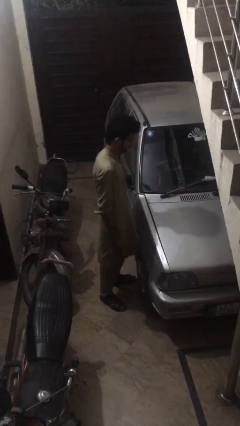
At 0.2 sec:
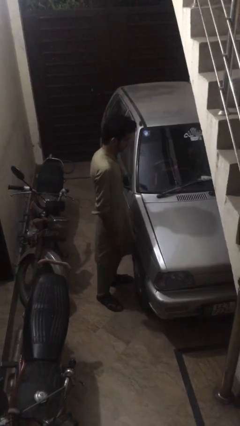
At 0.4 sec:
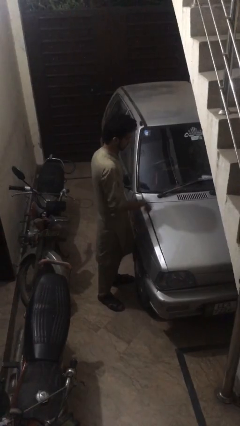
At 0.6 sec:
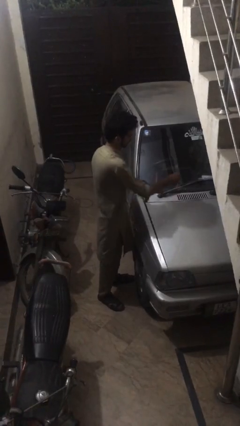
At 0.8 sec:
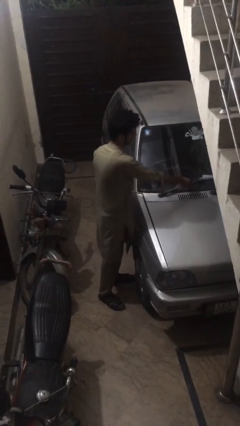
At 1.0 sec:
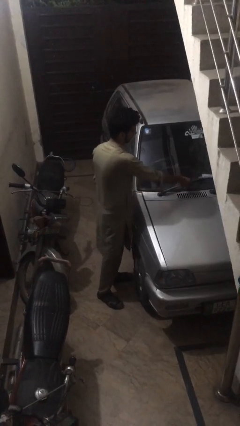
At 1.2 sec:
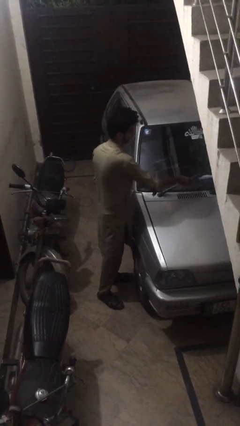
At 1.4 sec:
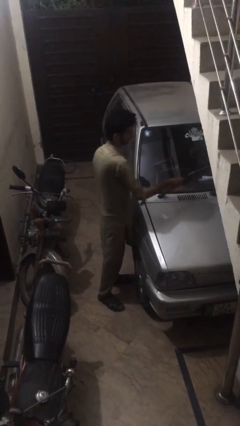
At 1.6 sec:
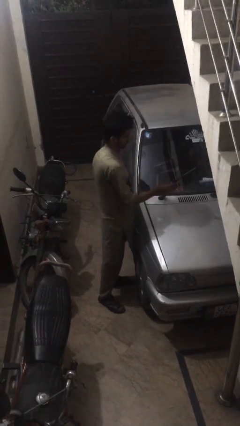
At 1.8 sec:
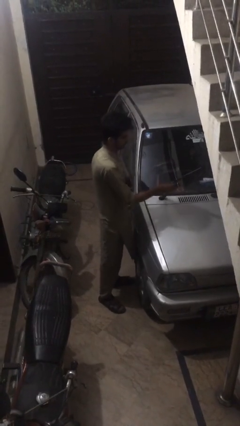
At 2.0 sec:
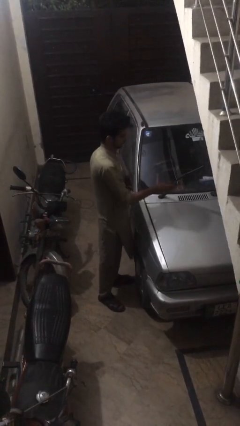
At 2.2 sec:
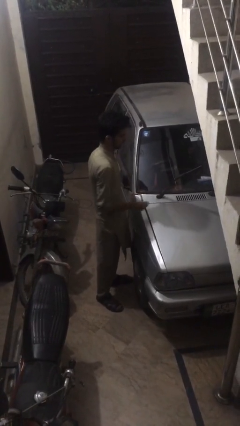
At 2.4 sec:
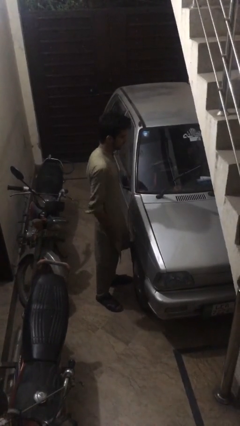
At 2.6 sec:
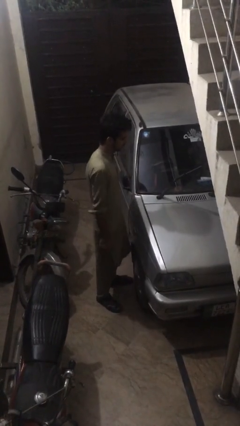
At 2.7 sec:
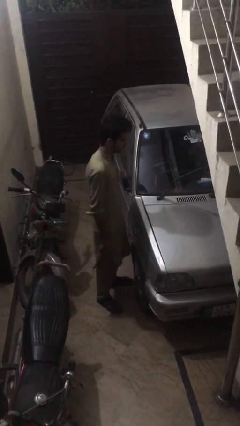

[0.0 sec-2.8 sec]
person flips up car wipers

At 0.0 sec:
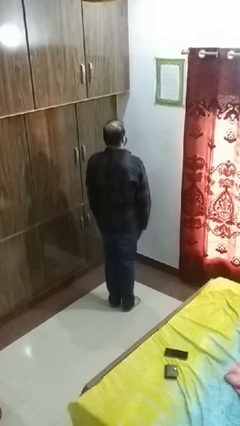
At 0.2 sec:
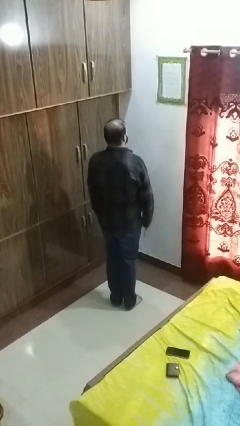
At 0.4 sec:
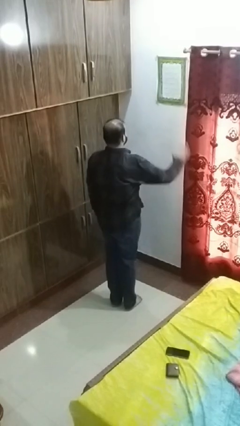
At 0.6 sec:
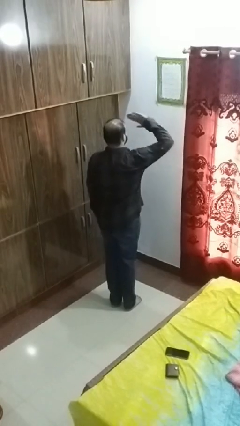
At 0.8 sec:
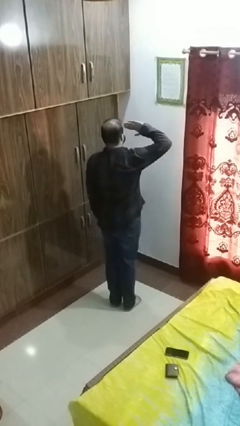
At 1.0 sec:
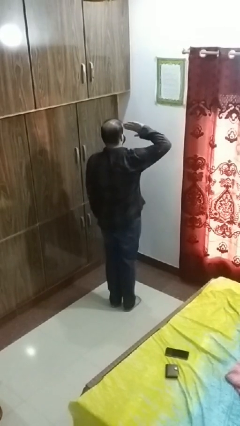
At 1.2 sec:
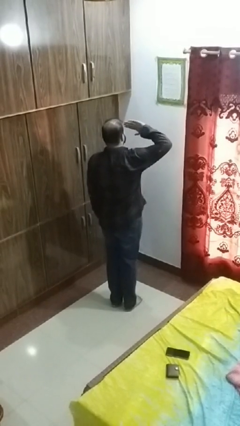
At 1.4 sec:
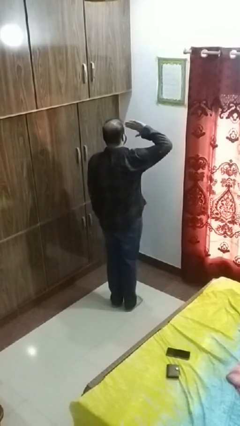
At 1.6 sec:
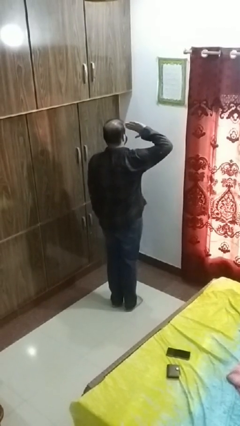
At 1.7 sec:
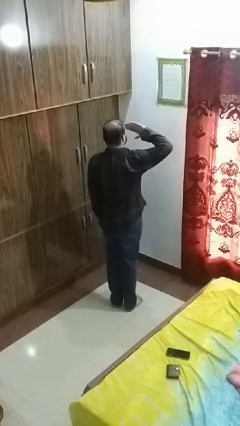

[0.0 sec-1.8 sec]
person salutes

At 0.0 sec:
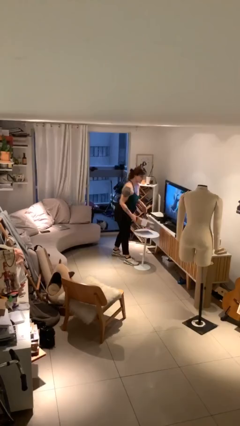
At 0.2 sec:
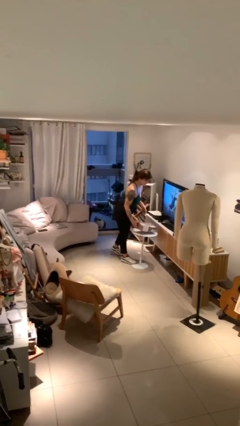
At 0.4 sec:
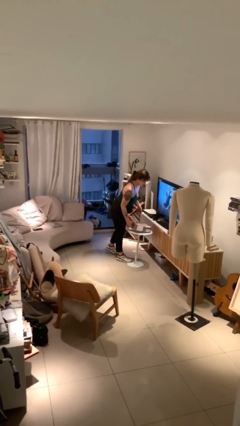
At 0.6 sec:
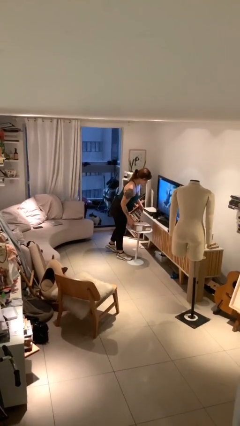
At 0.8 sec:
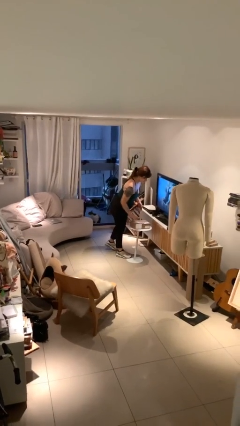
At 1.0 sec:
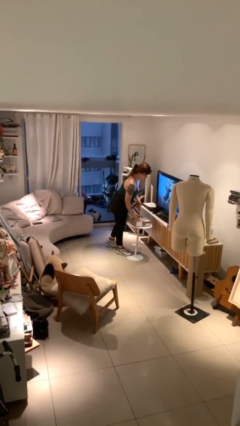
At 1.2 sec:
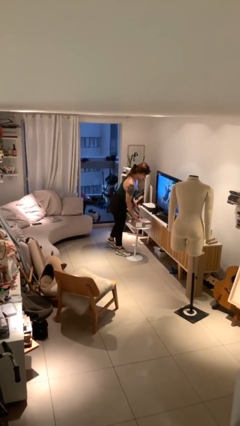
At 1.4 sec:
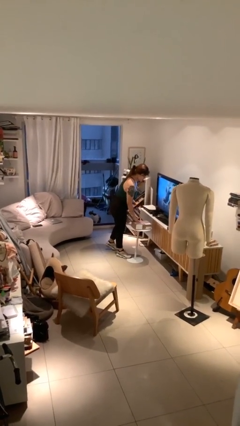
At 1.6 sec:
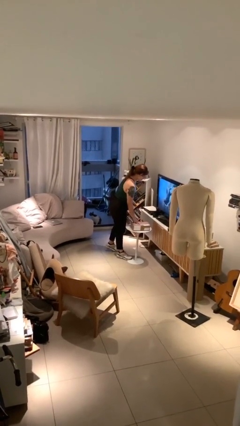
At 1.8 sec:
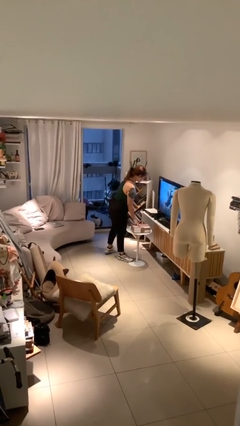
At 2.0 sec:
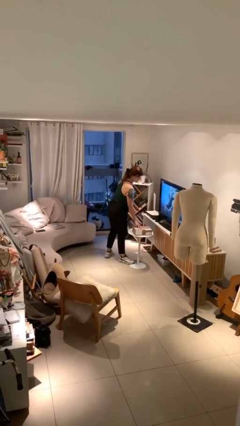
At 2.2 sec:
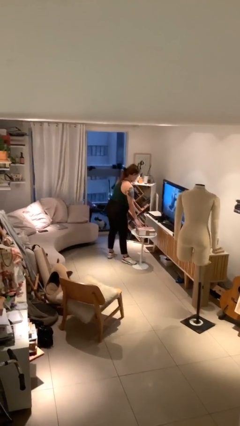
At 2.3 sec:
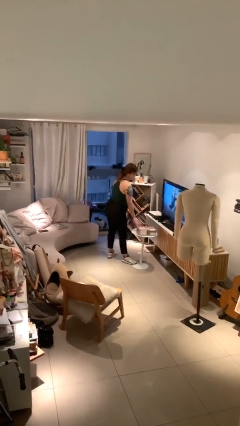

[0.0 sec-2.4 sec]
person puts down object on table

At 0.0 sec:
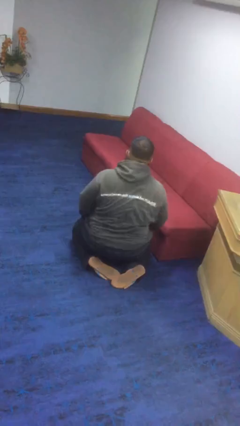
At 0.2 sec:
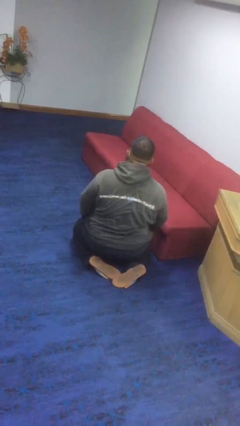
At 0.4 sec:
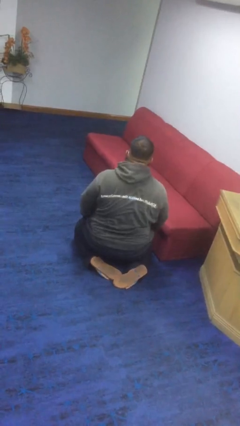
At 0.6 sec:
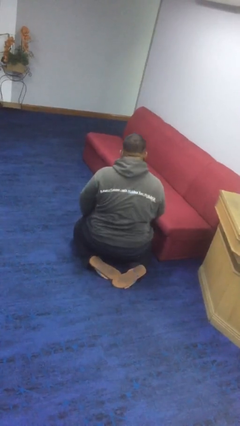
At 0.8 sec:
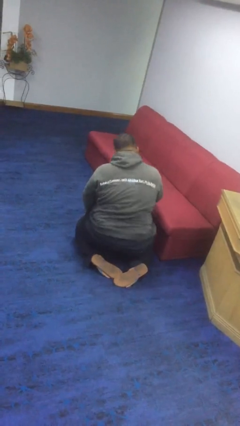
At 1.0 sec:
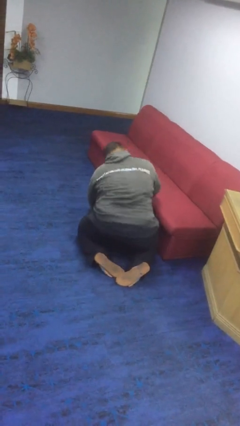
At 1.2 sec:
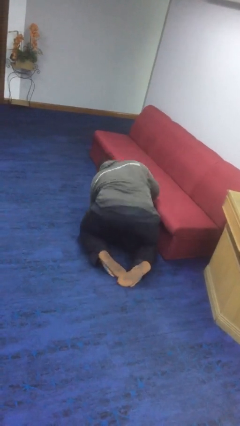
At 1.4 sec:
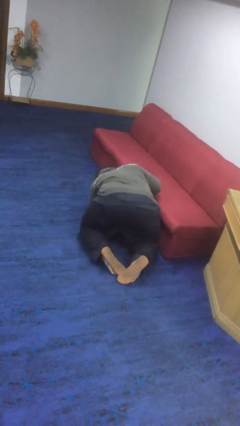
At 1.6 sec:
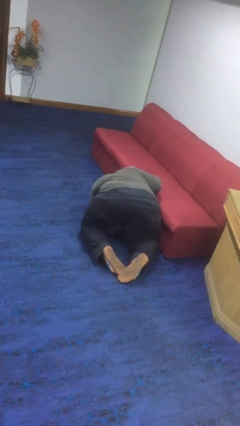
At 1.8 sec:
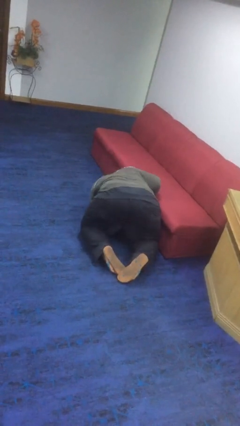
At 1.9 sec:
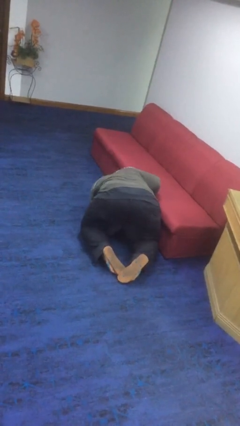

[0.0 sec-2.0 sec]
person searches under couch

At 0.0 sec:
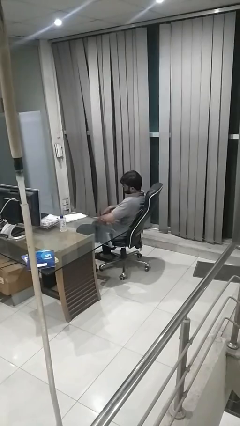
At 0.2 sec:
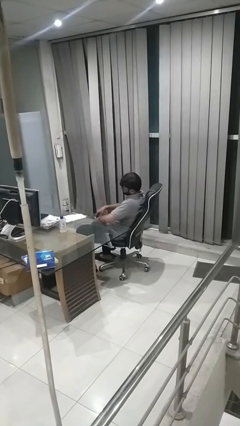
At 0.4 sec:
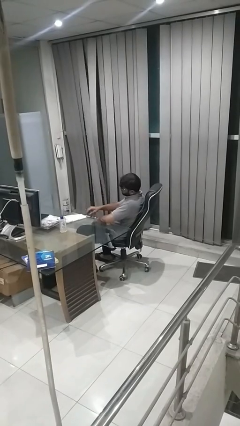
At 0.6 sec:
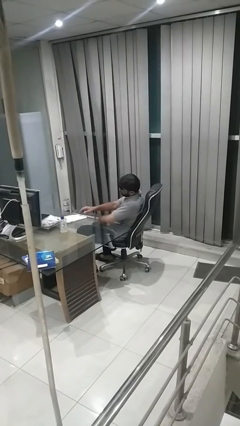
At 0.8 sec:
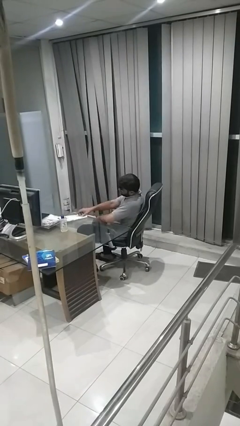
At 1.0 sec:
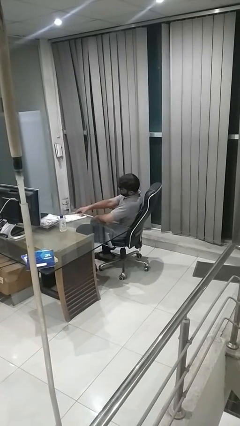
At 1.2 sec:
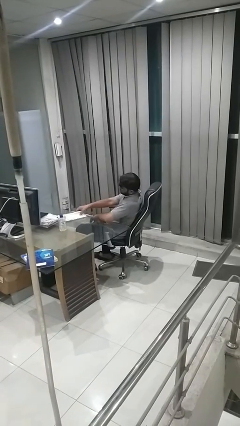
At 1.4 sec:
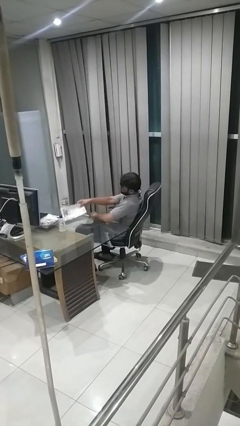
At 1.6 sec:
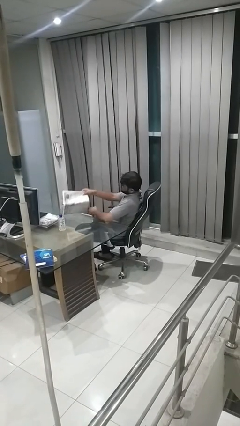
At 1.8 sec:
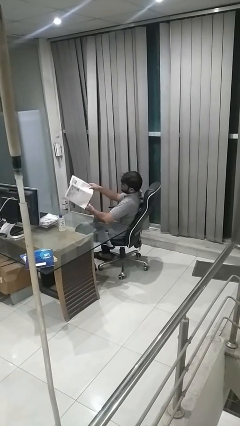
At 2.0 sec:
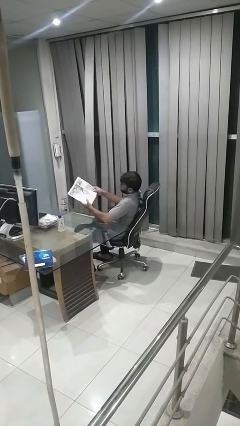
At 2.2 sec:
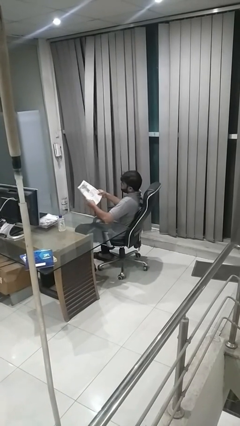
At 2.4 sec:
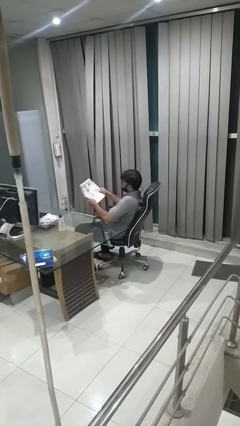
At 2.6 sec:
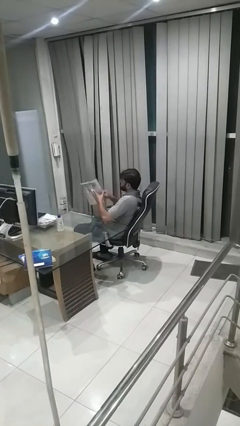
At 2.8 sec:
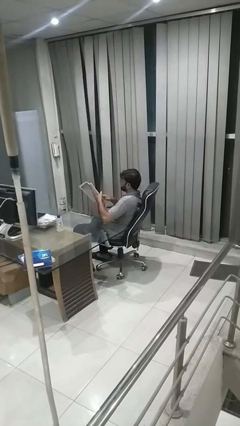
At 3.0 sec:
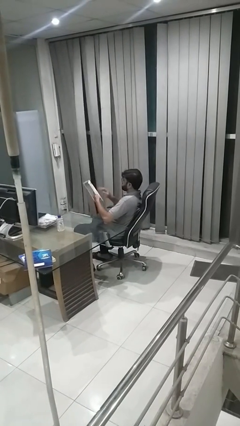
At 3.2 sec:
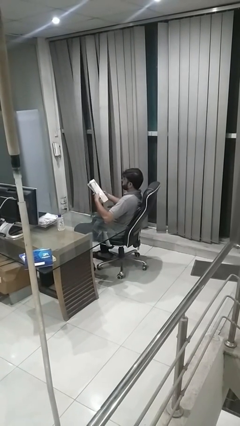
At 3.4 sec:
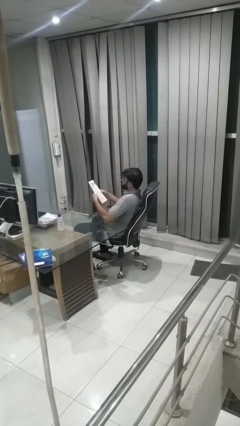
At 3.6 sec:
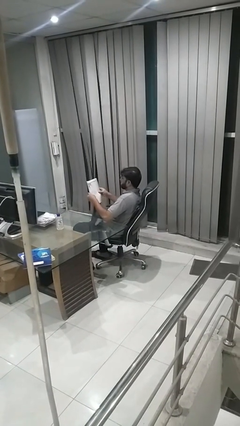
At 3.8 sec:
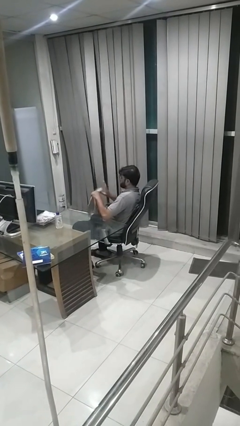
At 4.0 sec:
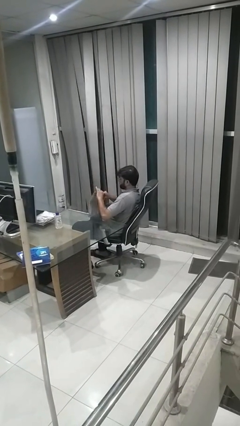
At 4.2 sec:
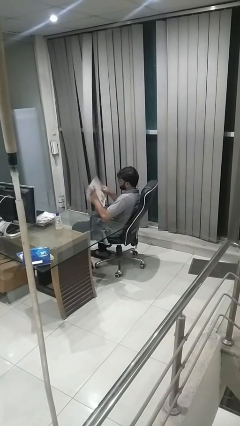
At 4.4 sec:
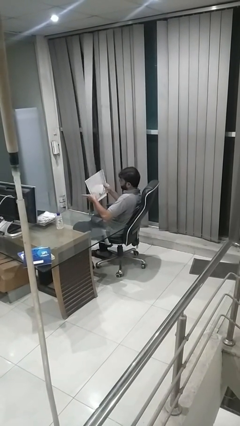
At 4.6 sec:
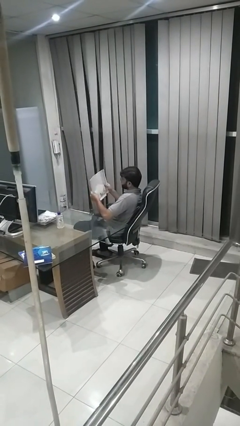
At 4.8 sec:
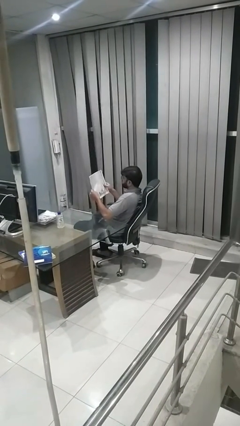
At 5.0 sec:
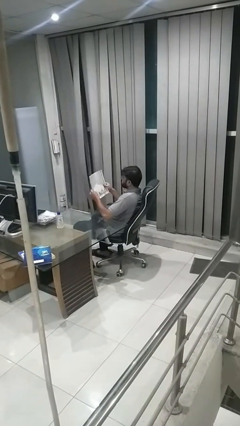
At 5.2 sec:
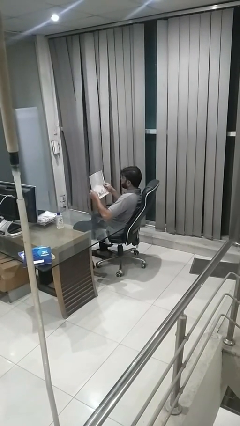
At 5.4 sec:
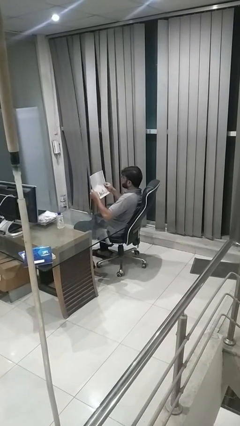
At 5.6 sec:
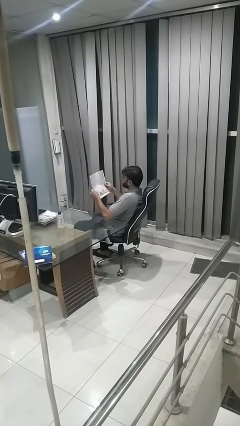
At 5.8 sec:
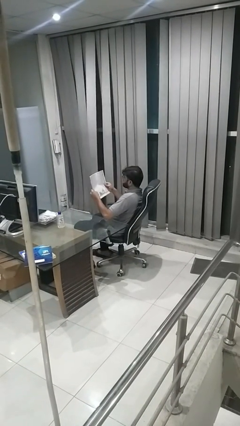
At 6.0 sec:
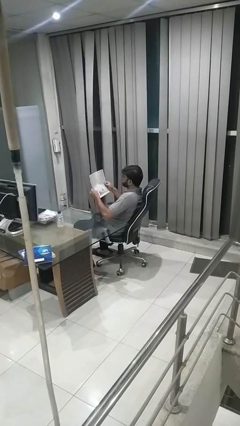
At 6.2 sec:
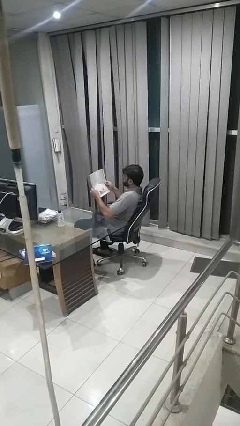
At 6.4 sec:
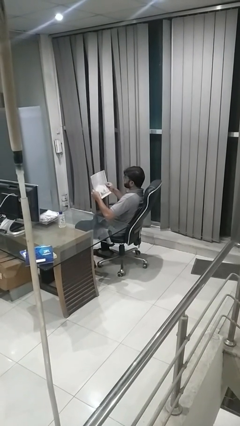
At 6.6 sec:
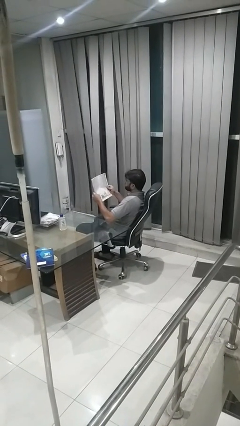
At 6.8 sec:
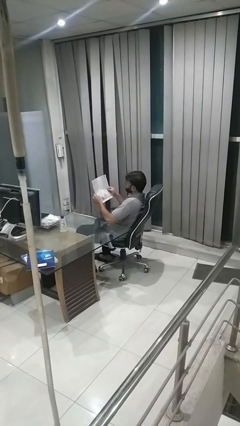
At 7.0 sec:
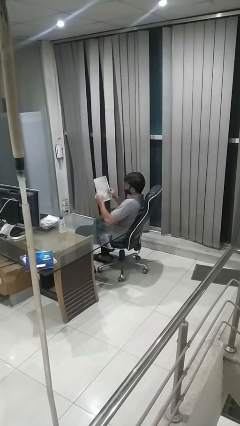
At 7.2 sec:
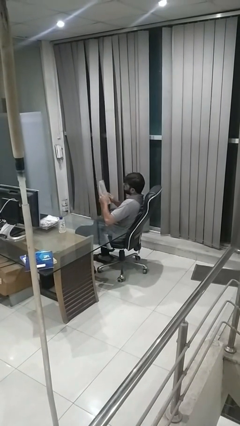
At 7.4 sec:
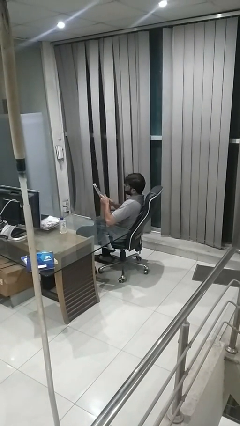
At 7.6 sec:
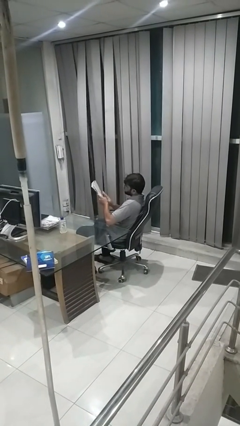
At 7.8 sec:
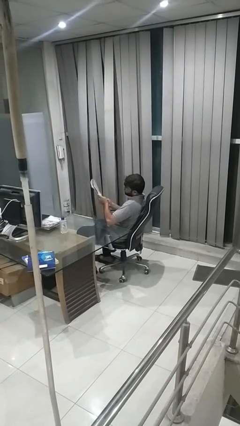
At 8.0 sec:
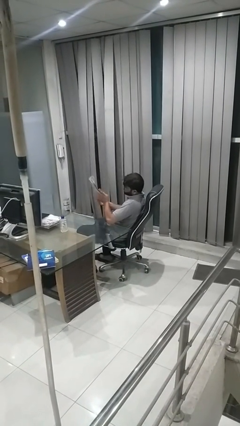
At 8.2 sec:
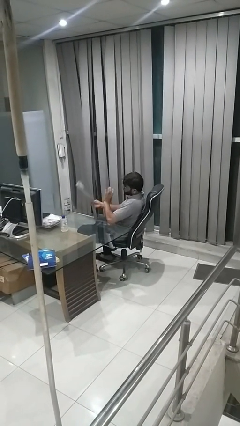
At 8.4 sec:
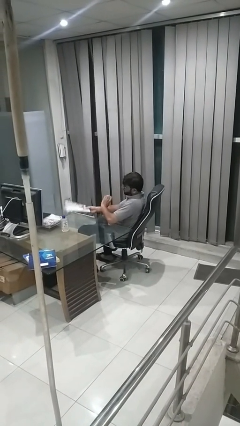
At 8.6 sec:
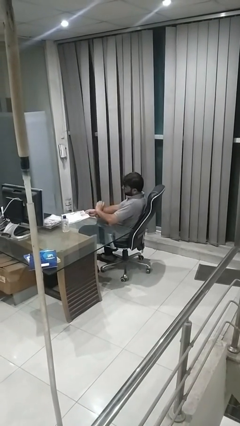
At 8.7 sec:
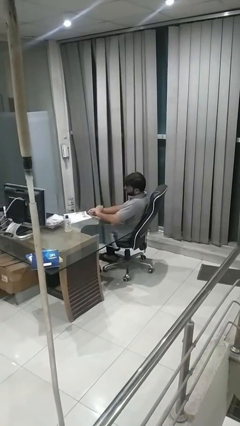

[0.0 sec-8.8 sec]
person reads newspaper
